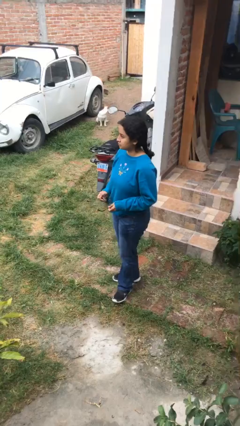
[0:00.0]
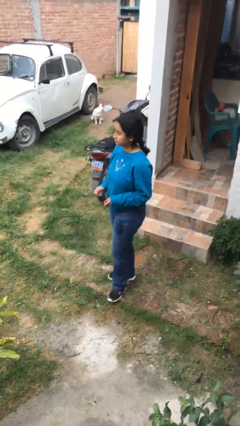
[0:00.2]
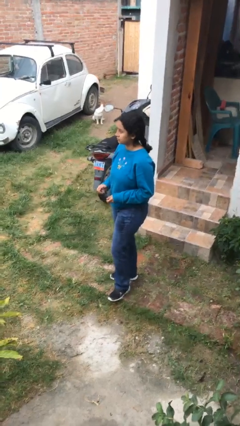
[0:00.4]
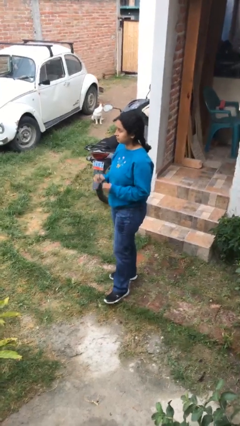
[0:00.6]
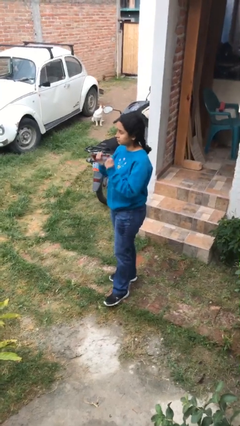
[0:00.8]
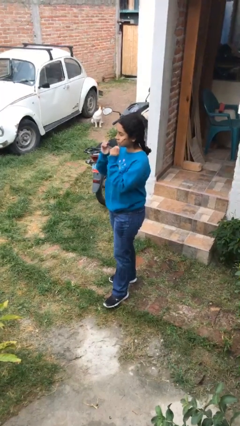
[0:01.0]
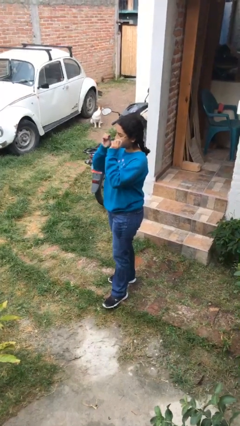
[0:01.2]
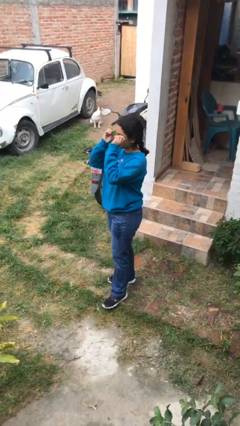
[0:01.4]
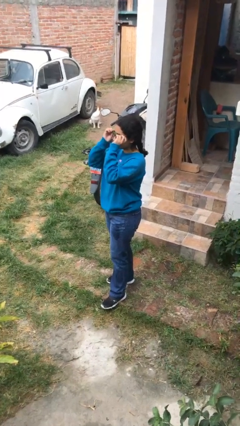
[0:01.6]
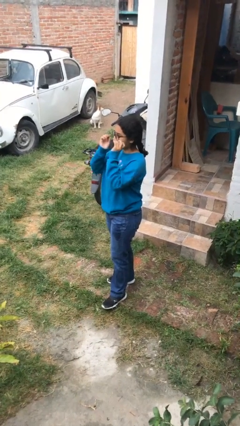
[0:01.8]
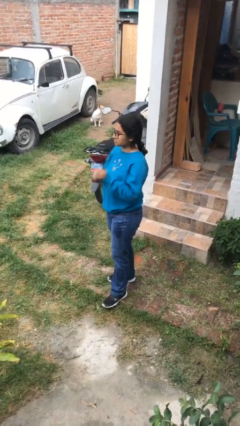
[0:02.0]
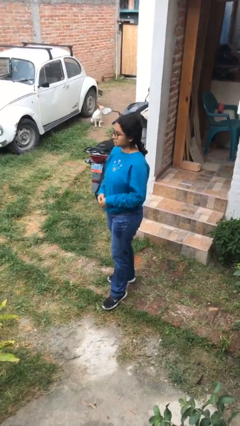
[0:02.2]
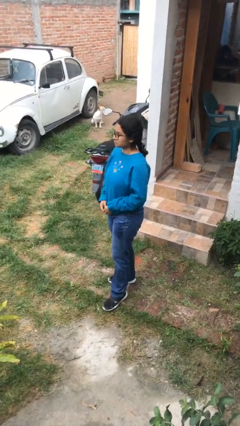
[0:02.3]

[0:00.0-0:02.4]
person puts on glasses

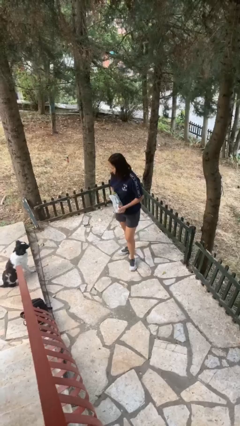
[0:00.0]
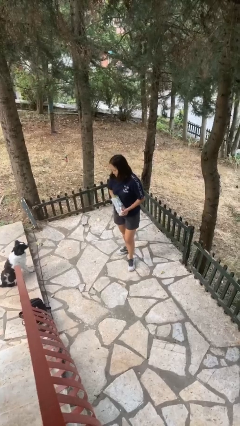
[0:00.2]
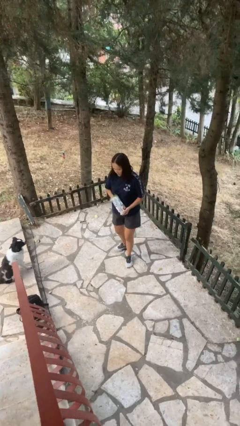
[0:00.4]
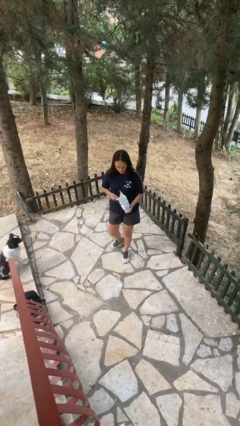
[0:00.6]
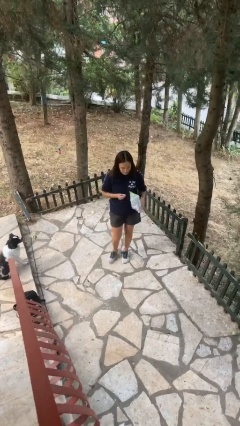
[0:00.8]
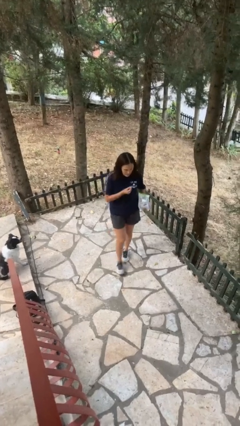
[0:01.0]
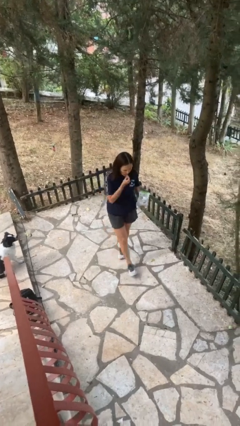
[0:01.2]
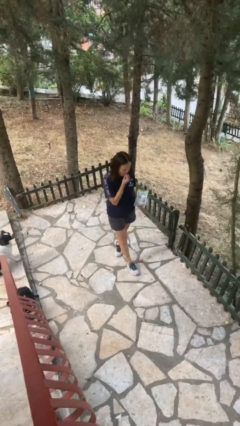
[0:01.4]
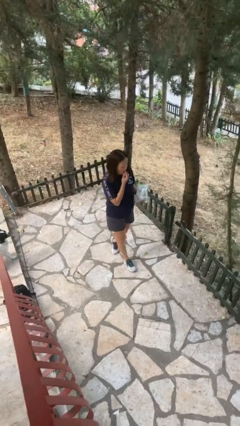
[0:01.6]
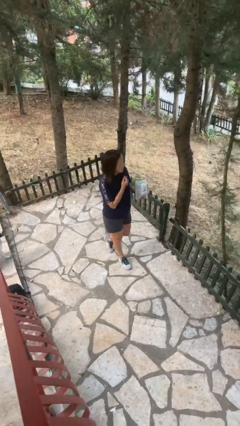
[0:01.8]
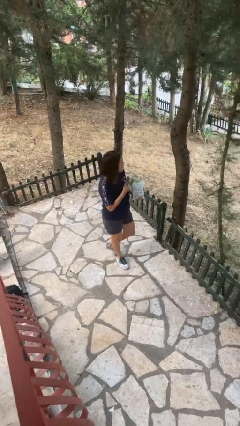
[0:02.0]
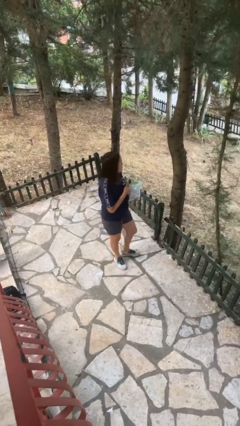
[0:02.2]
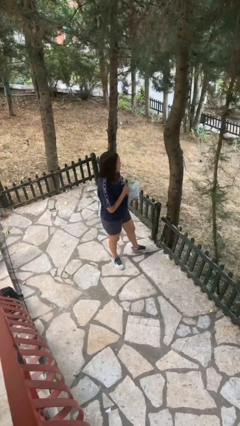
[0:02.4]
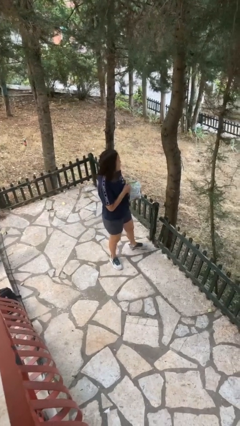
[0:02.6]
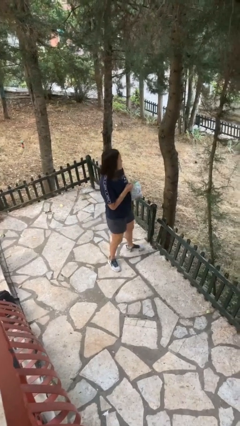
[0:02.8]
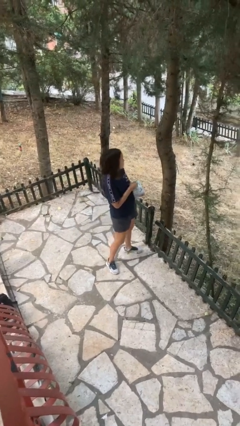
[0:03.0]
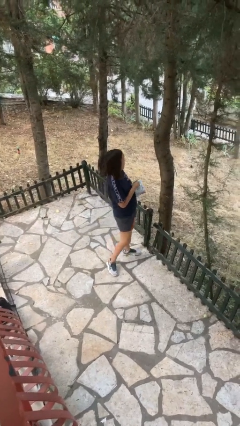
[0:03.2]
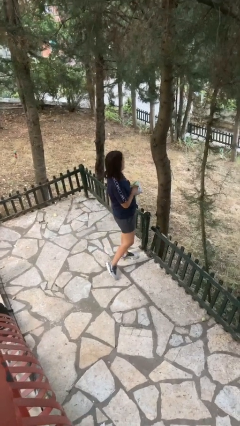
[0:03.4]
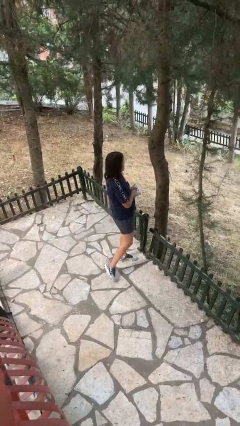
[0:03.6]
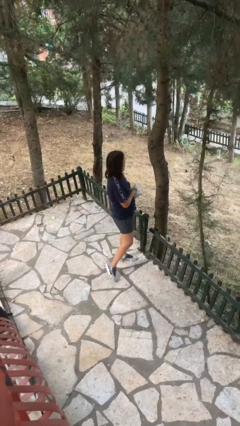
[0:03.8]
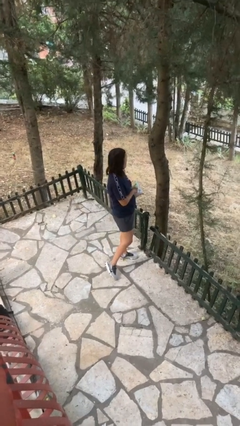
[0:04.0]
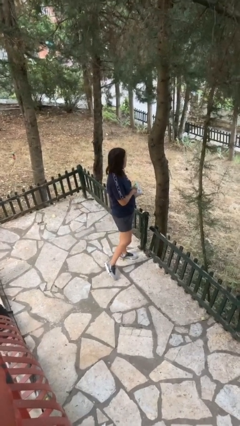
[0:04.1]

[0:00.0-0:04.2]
person eats snack from bag

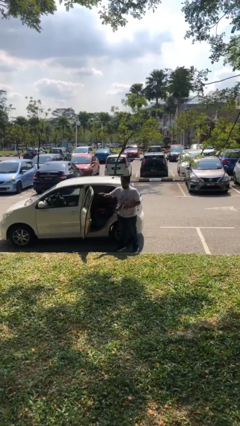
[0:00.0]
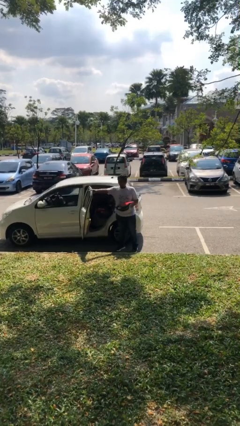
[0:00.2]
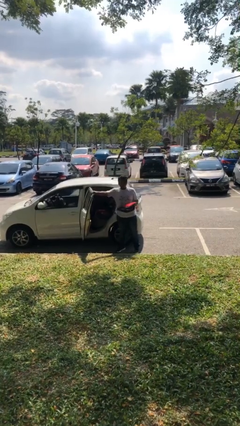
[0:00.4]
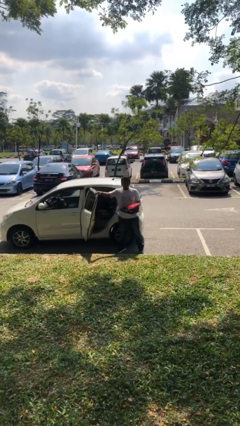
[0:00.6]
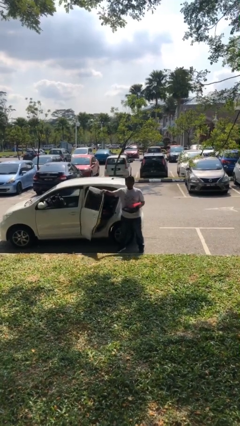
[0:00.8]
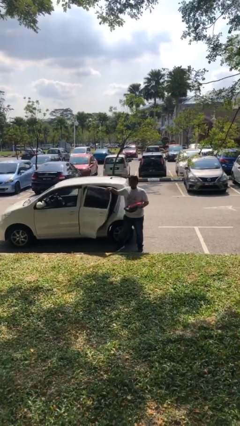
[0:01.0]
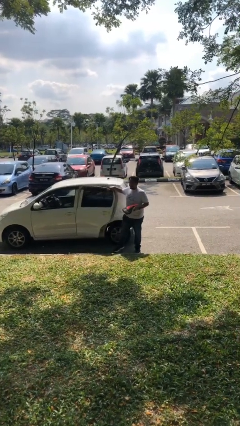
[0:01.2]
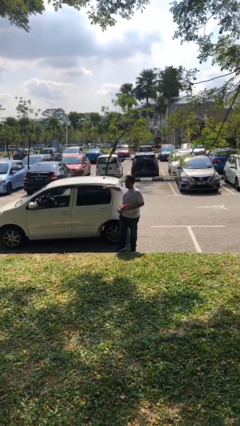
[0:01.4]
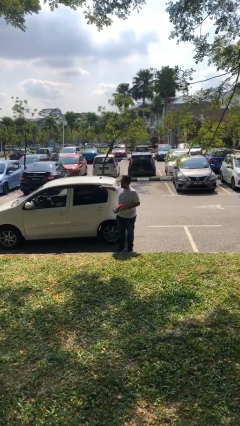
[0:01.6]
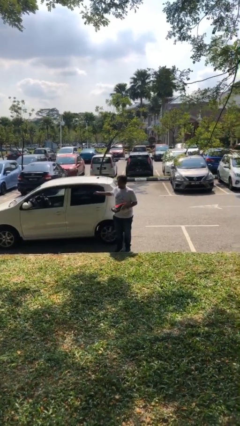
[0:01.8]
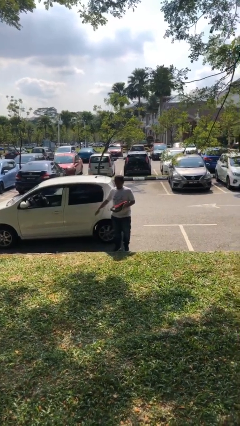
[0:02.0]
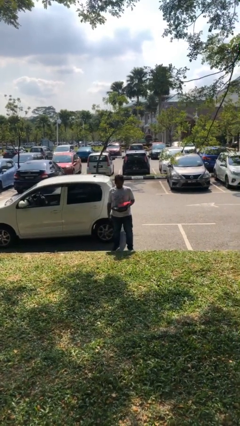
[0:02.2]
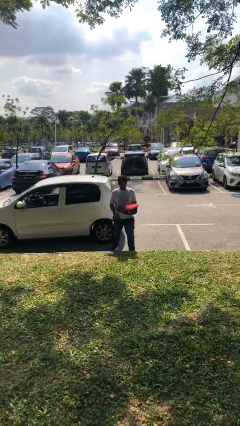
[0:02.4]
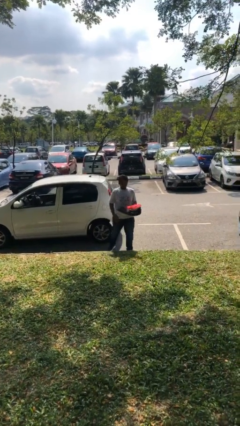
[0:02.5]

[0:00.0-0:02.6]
person closes car door

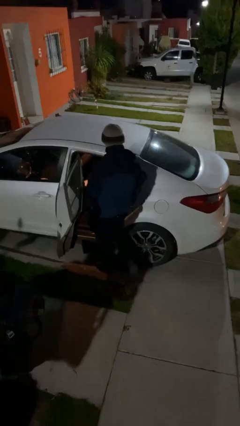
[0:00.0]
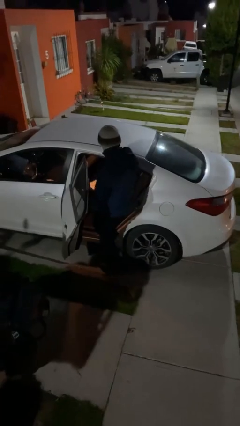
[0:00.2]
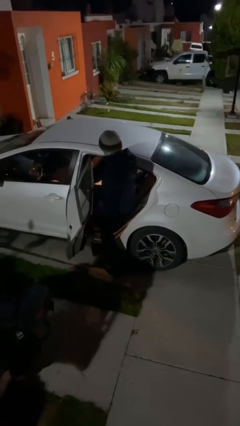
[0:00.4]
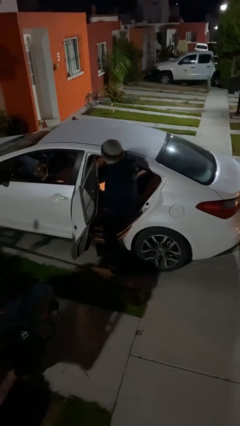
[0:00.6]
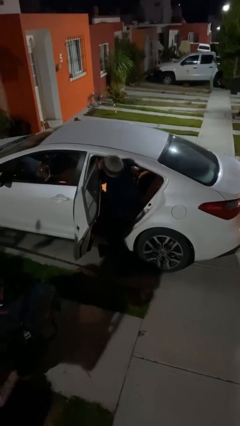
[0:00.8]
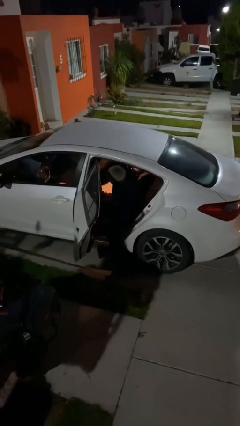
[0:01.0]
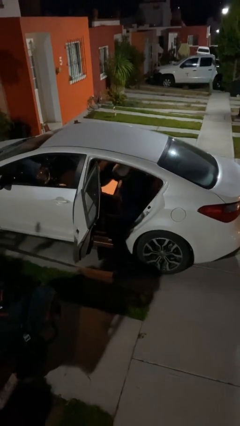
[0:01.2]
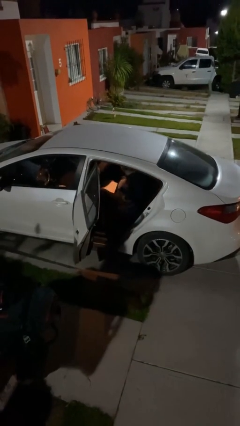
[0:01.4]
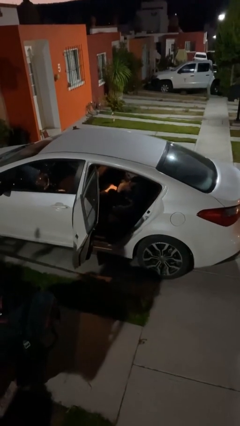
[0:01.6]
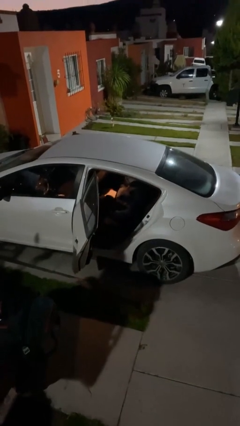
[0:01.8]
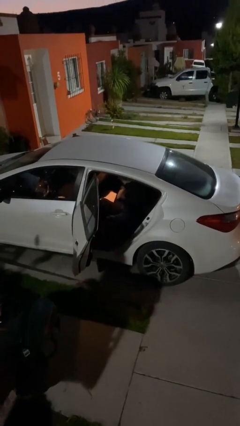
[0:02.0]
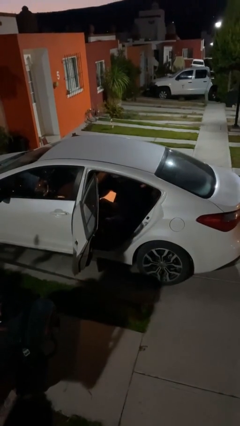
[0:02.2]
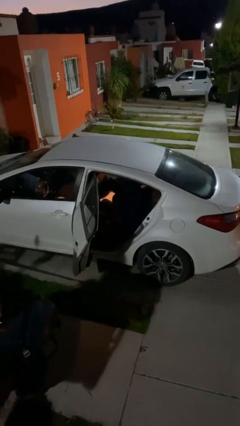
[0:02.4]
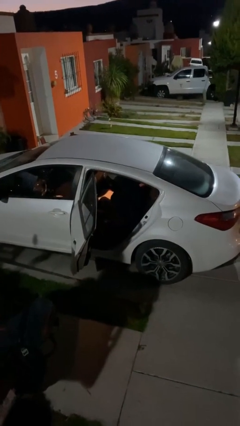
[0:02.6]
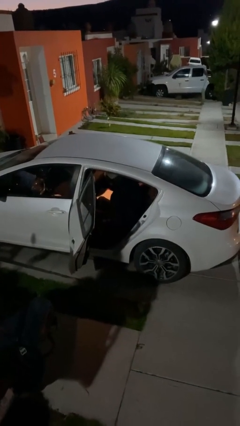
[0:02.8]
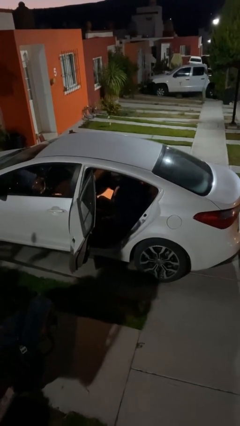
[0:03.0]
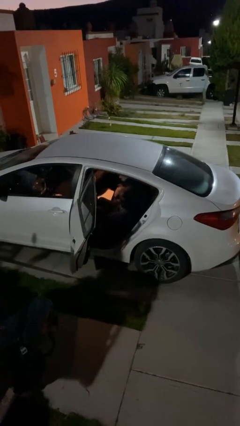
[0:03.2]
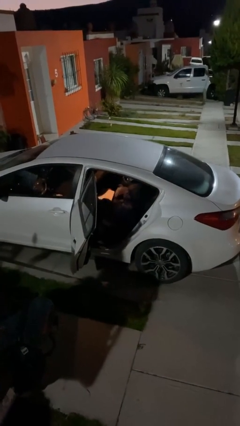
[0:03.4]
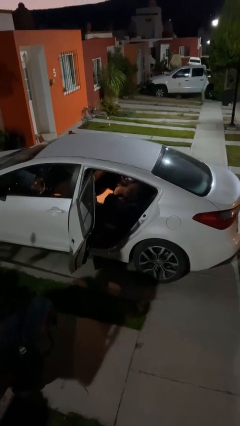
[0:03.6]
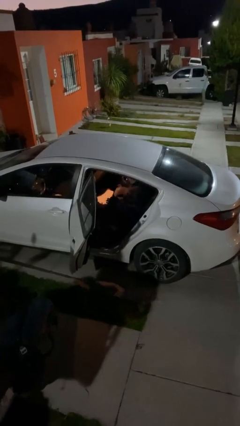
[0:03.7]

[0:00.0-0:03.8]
person enters car

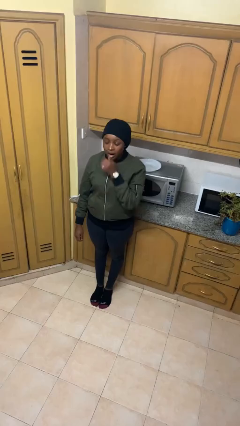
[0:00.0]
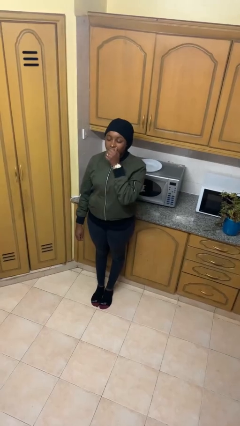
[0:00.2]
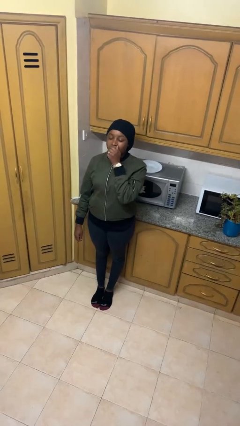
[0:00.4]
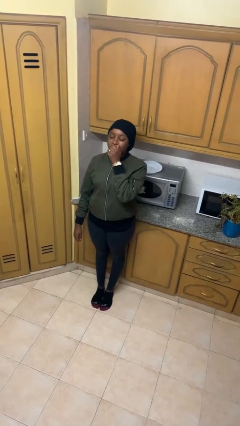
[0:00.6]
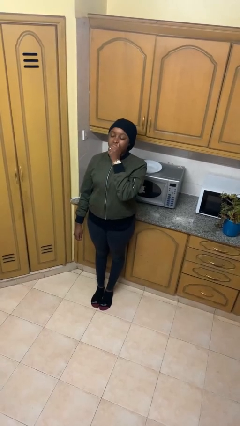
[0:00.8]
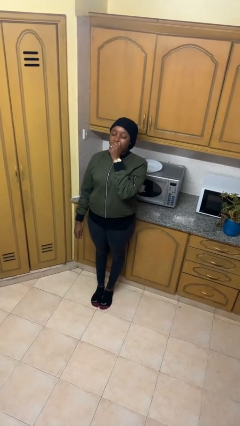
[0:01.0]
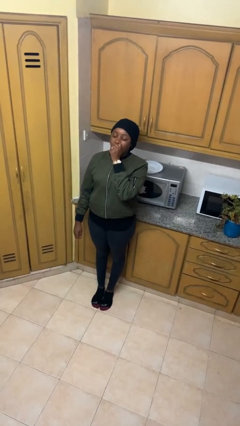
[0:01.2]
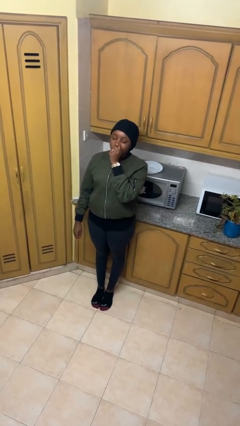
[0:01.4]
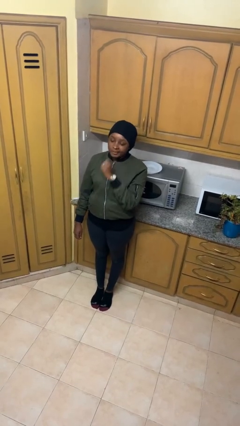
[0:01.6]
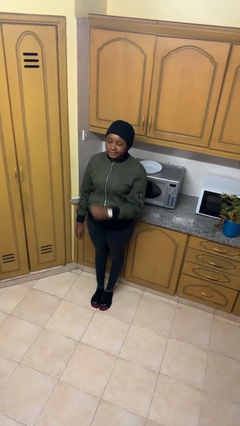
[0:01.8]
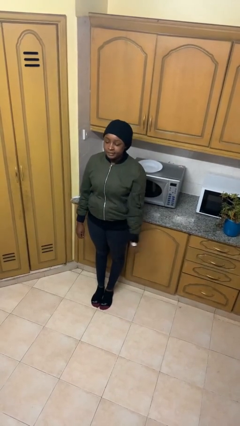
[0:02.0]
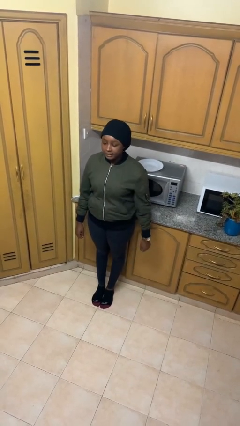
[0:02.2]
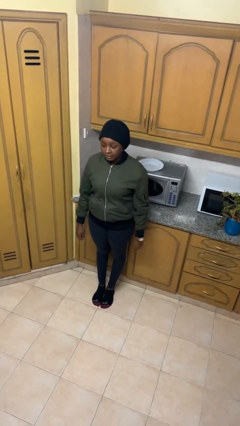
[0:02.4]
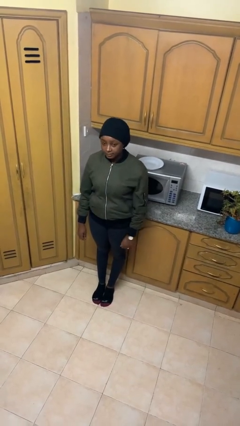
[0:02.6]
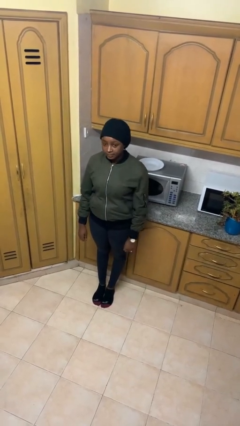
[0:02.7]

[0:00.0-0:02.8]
person yawns

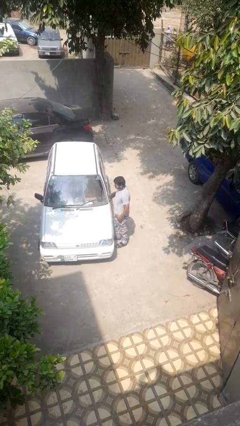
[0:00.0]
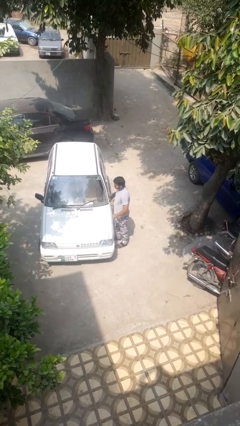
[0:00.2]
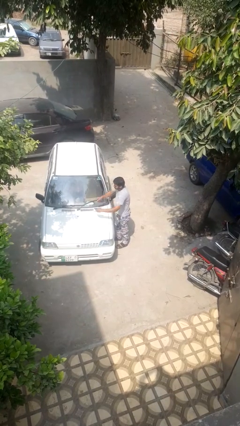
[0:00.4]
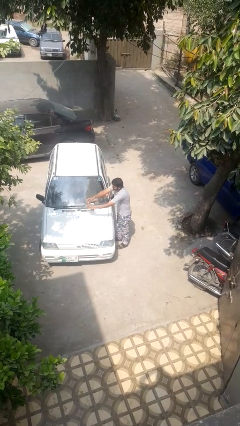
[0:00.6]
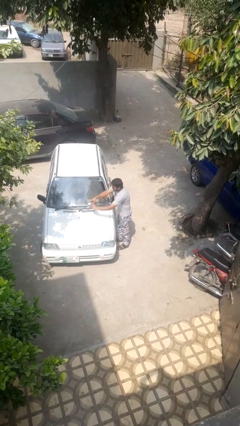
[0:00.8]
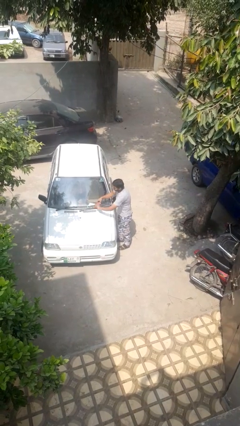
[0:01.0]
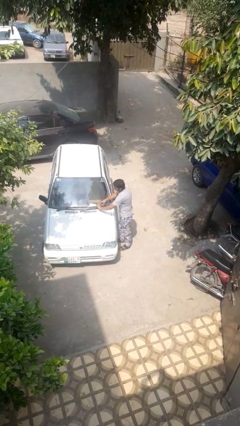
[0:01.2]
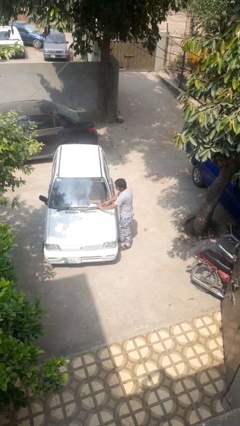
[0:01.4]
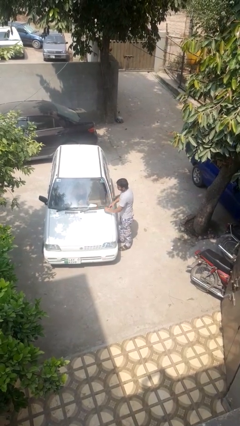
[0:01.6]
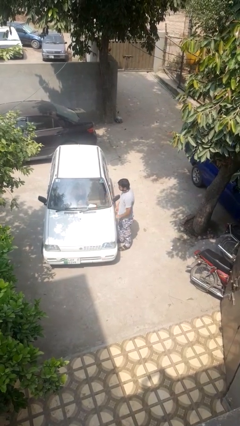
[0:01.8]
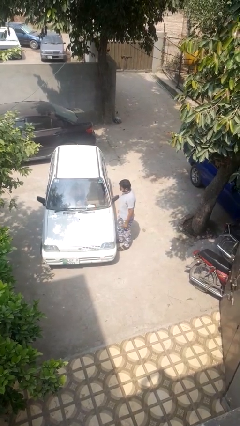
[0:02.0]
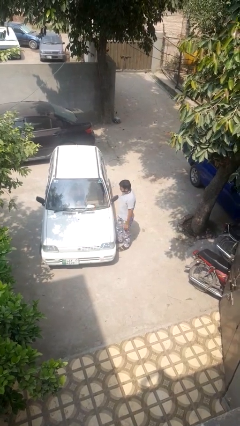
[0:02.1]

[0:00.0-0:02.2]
person flips down car wipers
